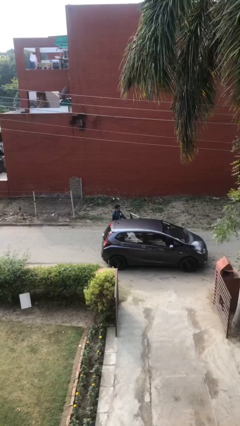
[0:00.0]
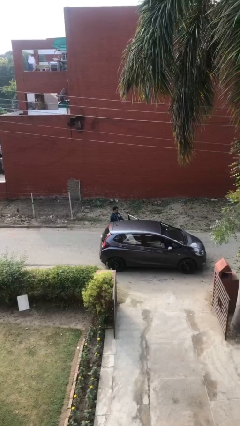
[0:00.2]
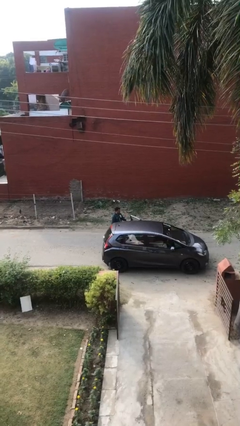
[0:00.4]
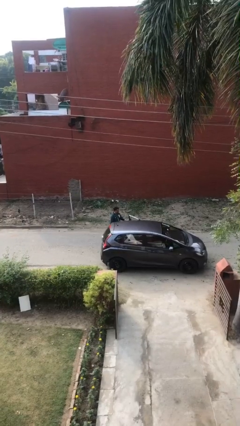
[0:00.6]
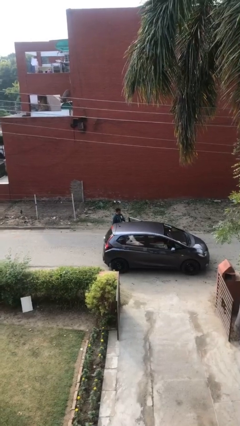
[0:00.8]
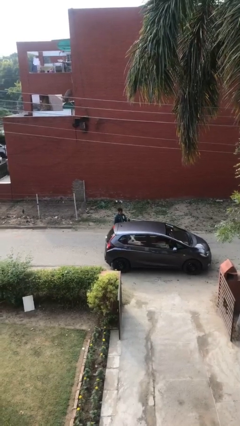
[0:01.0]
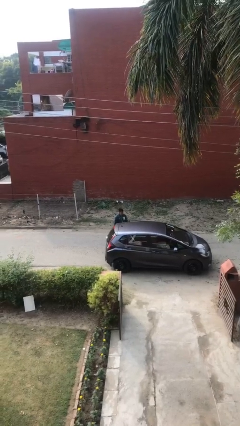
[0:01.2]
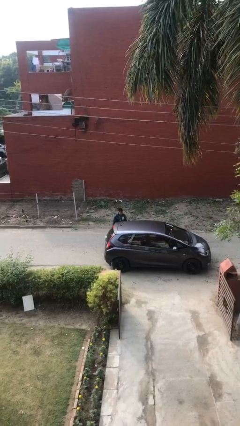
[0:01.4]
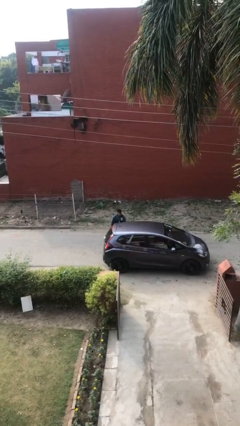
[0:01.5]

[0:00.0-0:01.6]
person closes car door

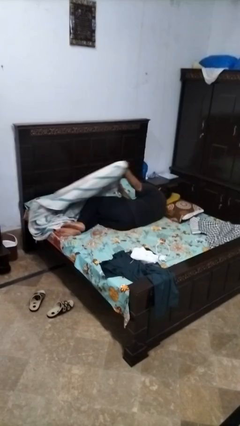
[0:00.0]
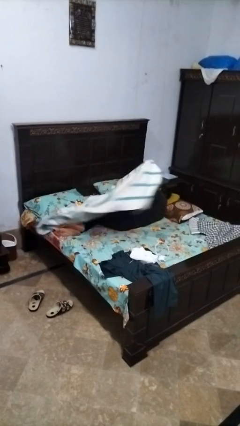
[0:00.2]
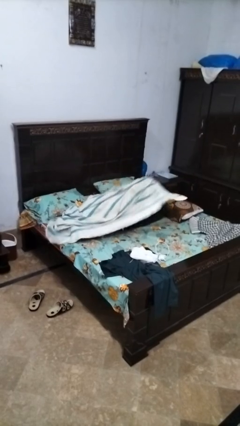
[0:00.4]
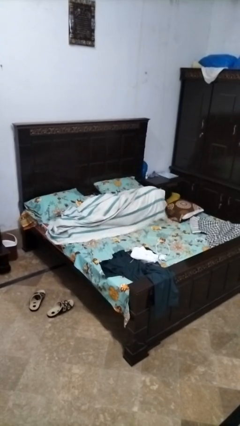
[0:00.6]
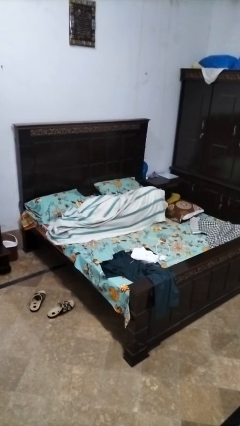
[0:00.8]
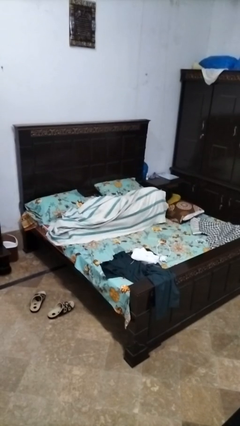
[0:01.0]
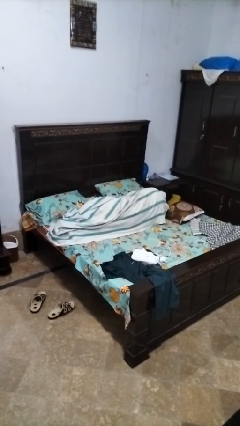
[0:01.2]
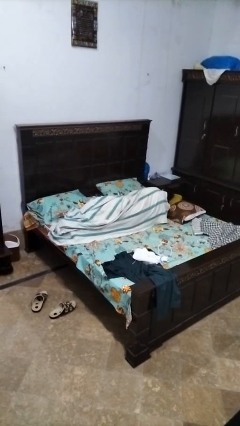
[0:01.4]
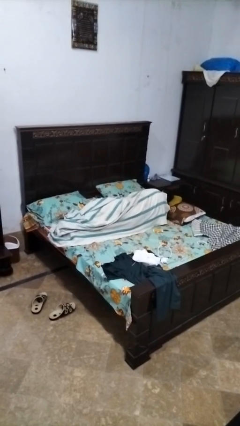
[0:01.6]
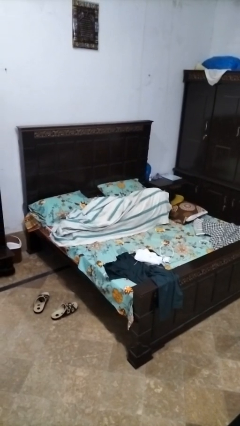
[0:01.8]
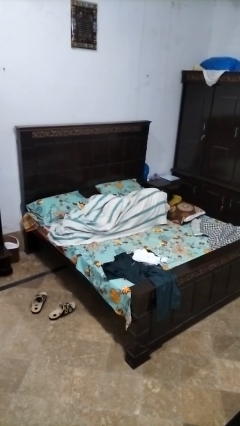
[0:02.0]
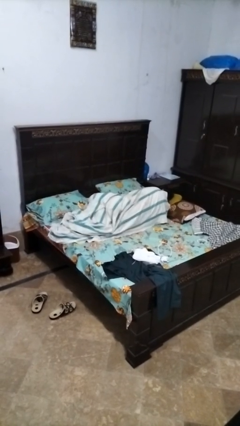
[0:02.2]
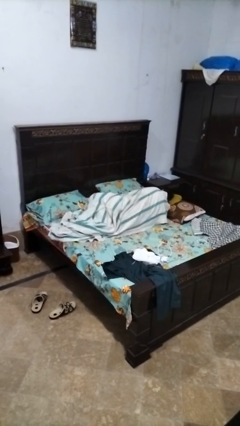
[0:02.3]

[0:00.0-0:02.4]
person covers with bedsheets

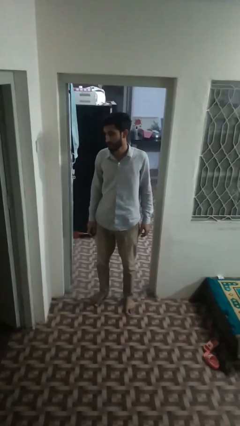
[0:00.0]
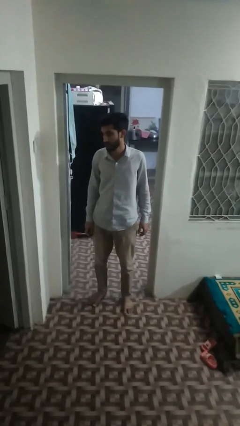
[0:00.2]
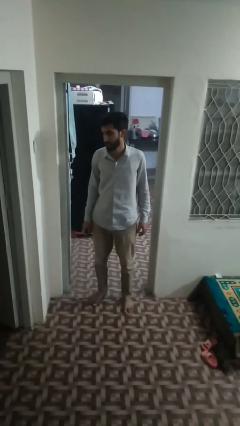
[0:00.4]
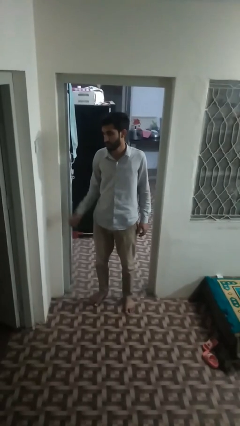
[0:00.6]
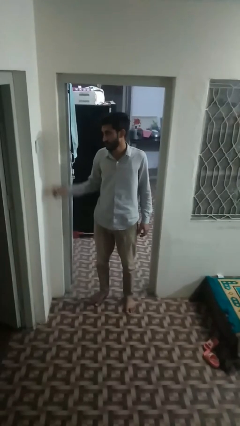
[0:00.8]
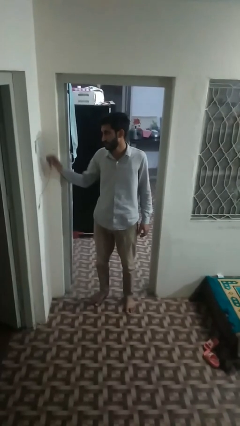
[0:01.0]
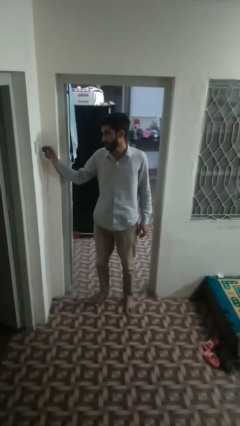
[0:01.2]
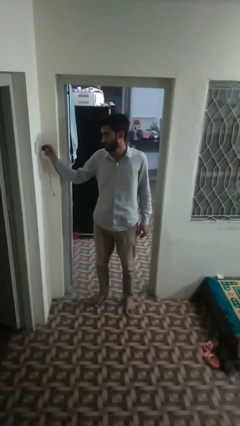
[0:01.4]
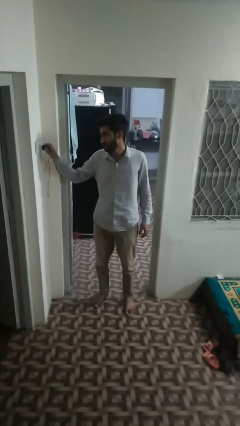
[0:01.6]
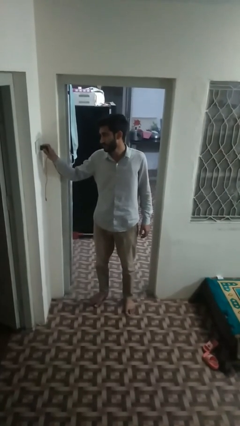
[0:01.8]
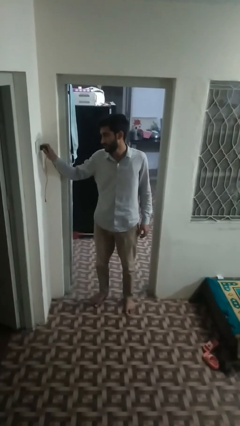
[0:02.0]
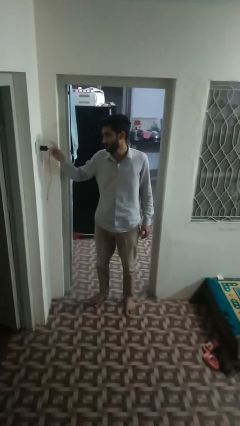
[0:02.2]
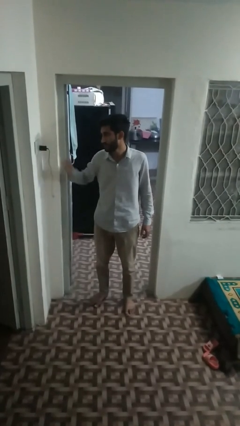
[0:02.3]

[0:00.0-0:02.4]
person plugs into electrical socket

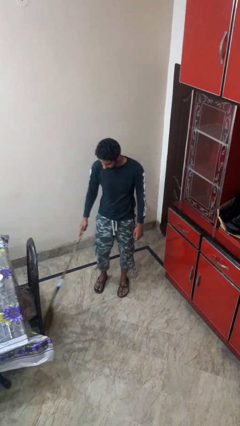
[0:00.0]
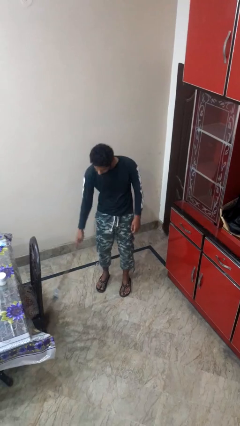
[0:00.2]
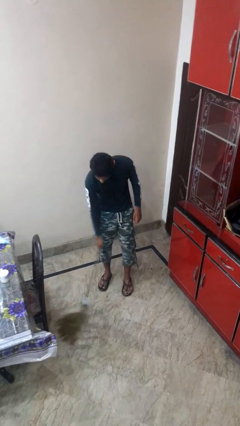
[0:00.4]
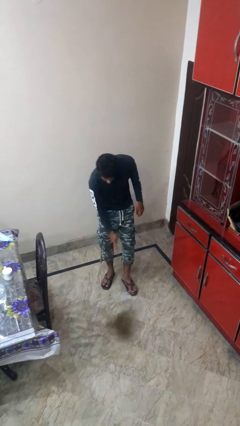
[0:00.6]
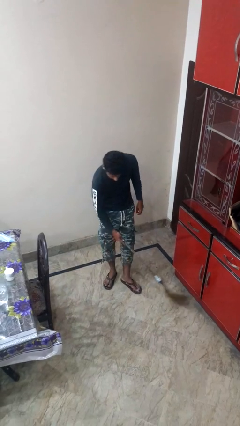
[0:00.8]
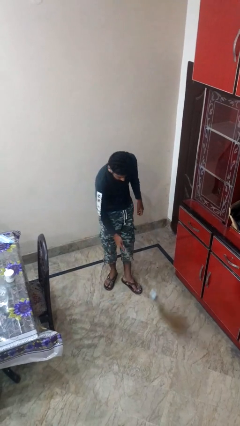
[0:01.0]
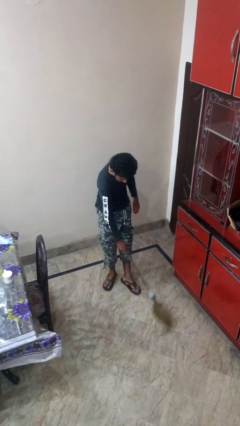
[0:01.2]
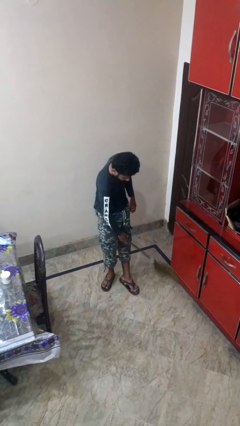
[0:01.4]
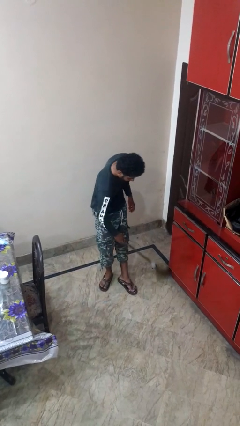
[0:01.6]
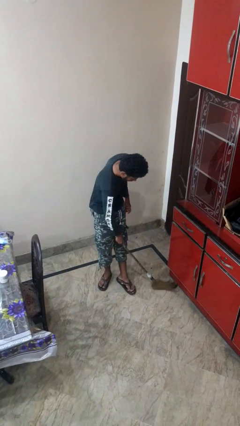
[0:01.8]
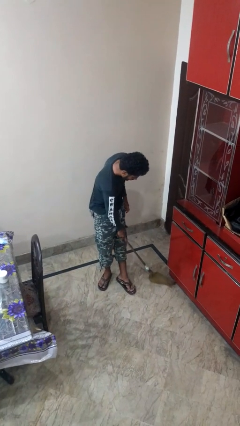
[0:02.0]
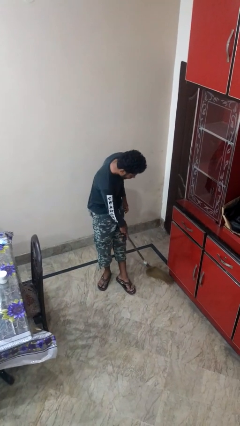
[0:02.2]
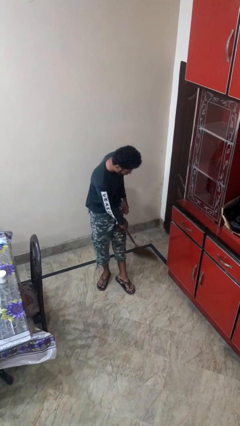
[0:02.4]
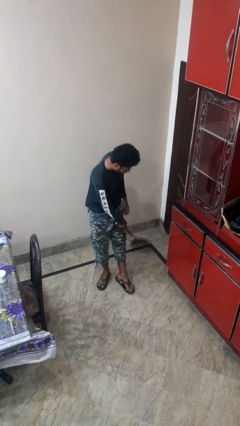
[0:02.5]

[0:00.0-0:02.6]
person sweeps floor

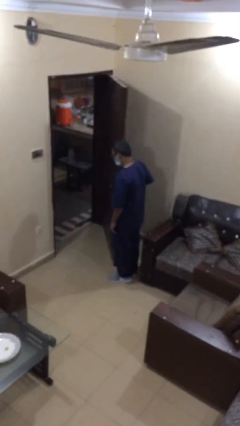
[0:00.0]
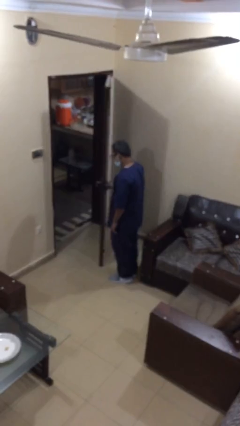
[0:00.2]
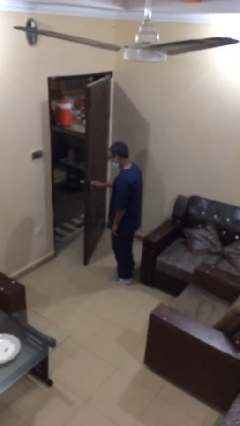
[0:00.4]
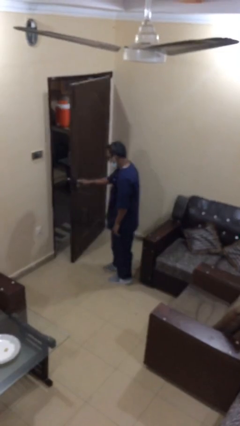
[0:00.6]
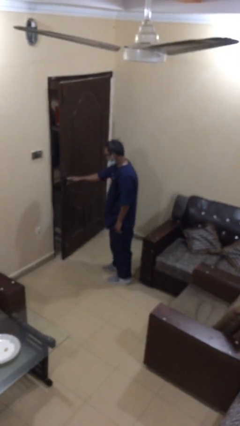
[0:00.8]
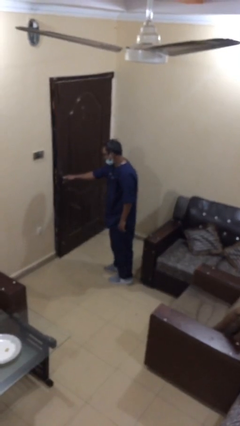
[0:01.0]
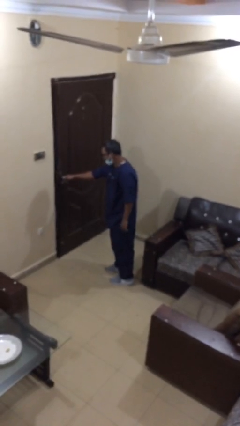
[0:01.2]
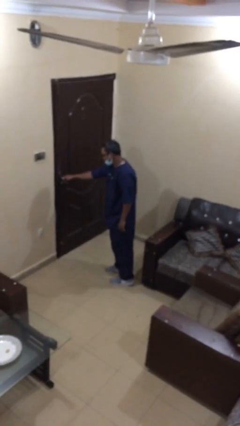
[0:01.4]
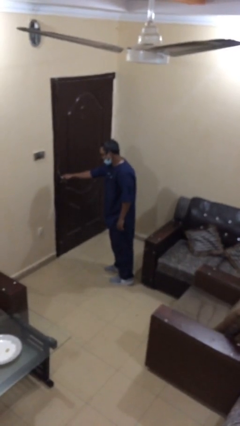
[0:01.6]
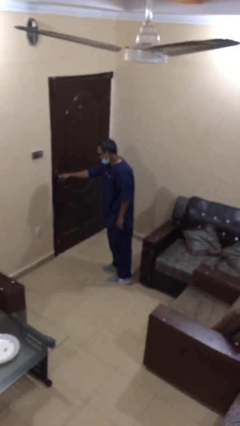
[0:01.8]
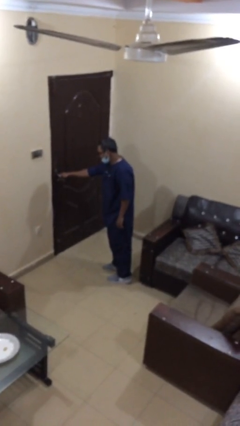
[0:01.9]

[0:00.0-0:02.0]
person closes facility door

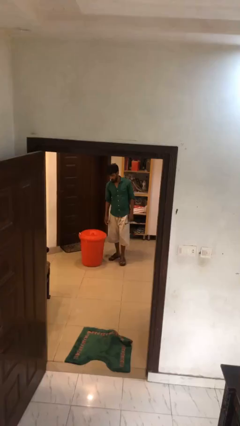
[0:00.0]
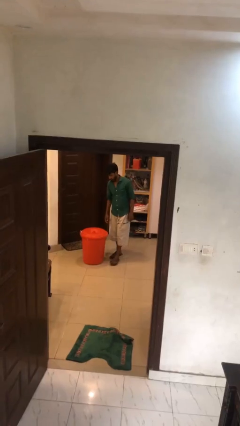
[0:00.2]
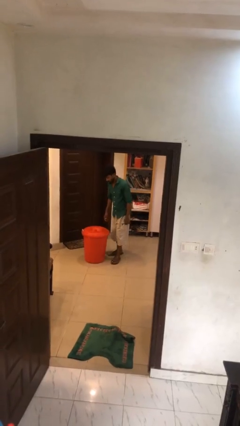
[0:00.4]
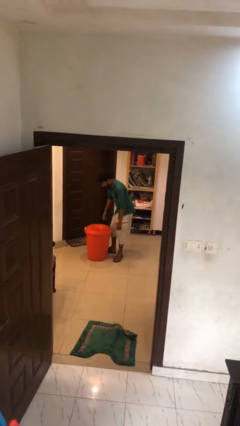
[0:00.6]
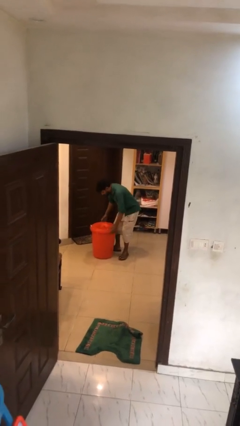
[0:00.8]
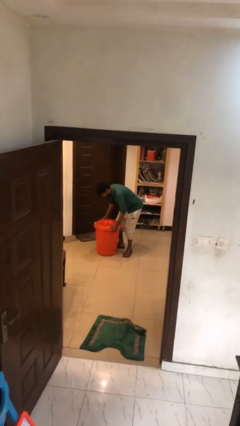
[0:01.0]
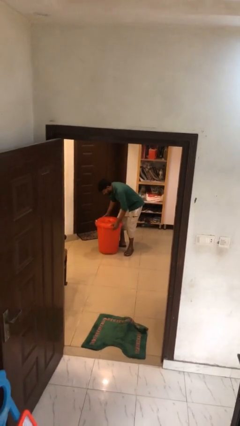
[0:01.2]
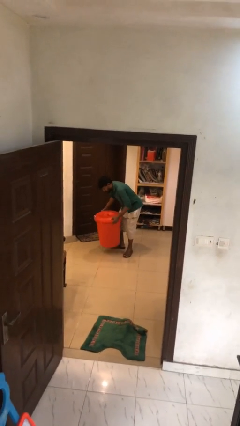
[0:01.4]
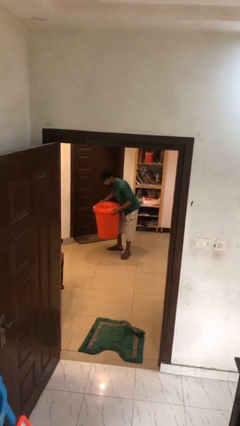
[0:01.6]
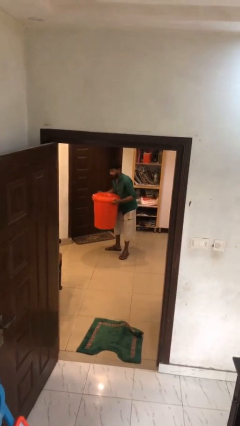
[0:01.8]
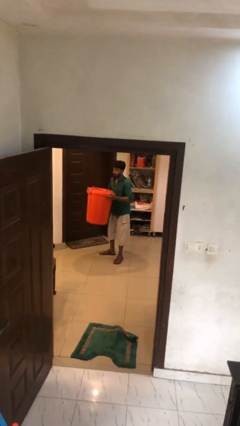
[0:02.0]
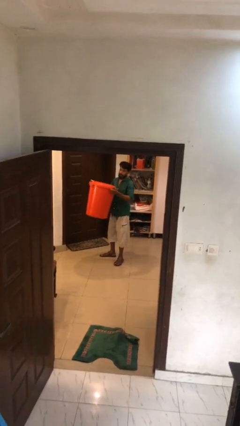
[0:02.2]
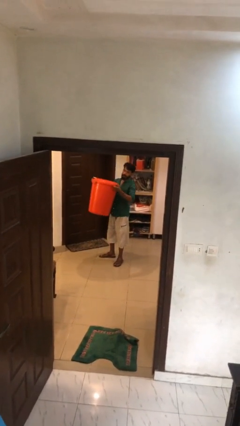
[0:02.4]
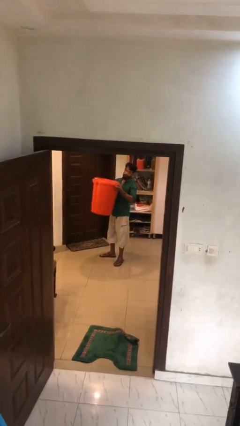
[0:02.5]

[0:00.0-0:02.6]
person picks up object from floor

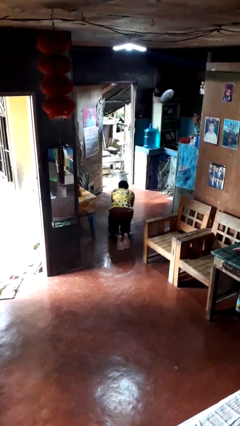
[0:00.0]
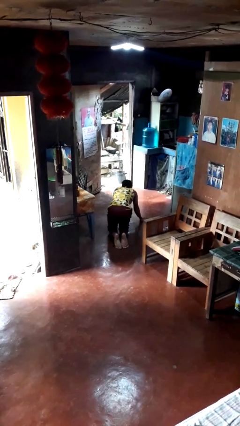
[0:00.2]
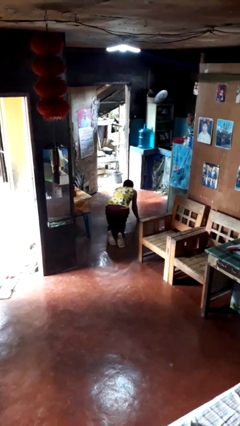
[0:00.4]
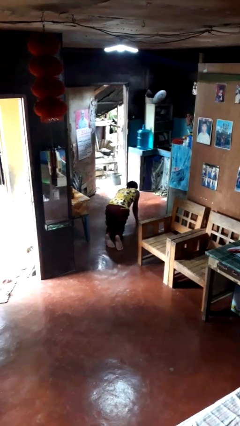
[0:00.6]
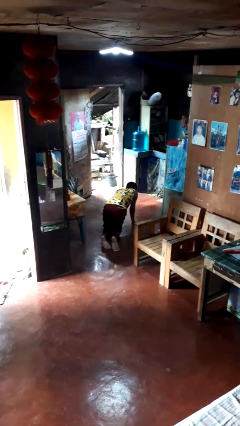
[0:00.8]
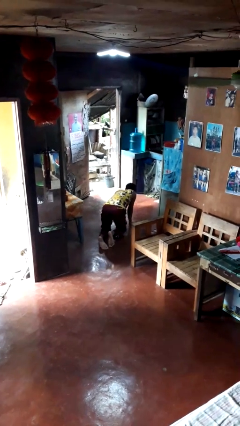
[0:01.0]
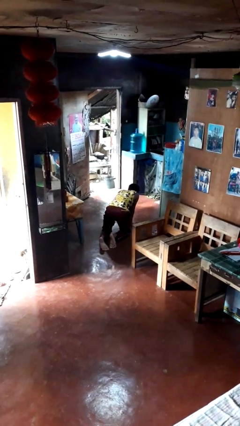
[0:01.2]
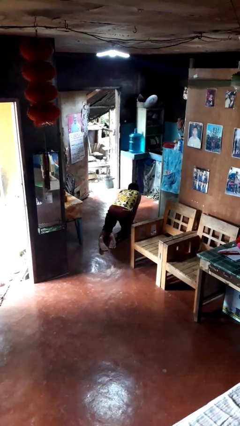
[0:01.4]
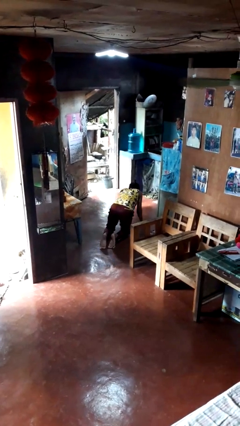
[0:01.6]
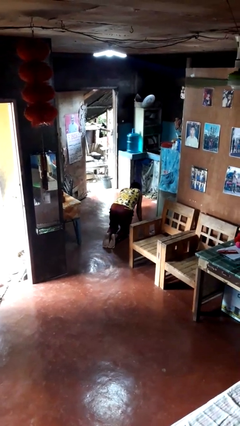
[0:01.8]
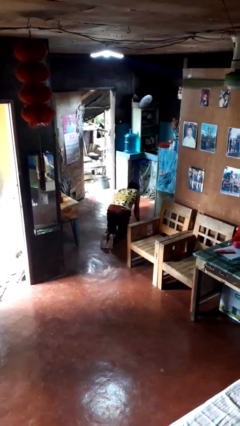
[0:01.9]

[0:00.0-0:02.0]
person crawls

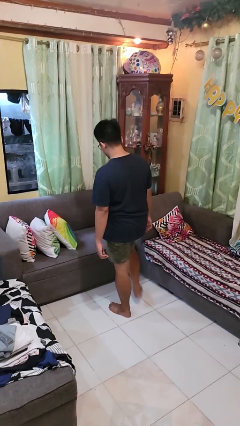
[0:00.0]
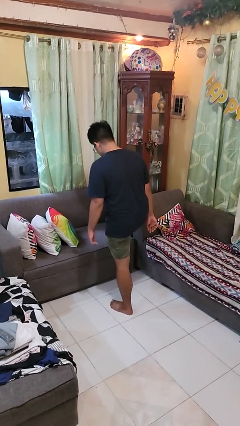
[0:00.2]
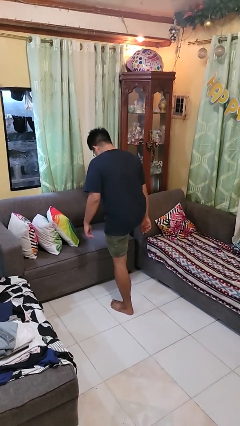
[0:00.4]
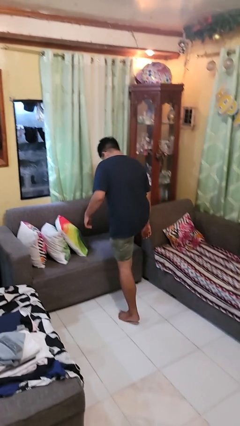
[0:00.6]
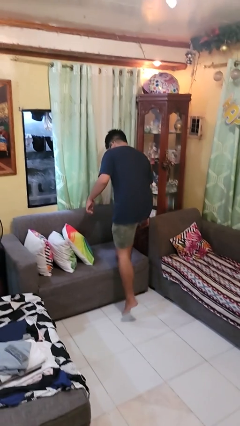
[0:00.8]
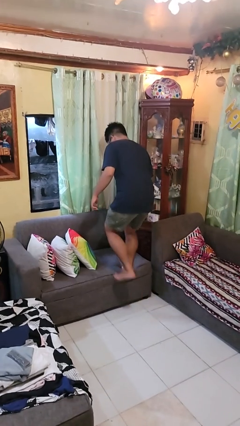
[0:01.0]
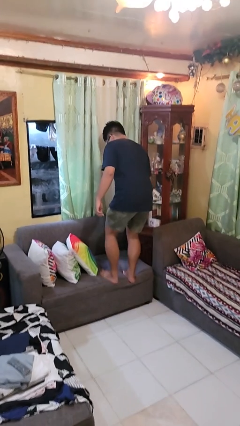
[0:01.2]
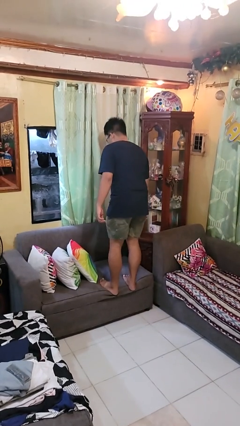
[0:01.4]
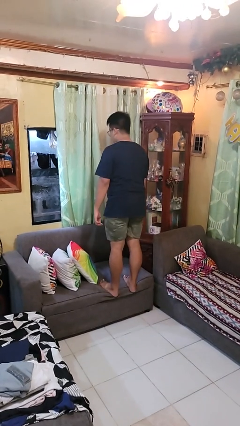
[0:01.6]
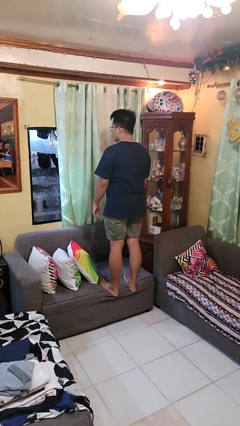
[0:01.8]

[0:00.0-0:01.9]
person climbs on couch
